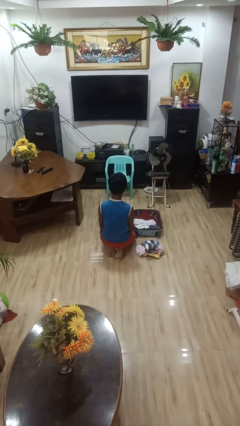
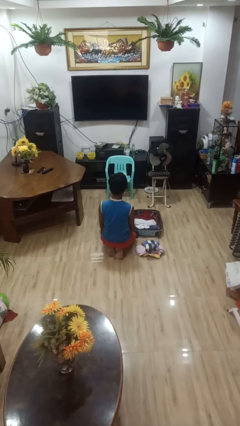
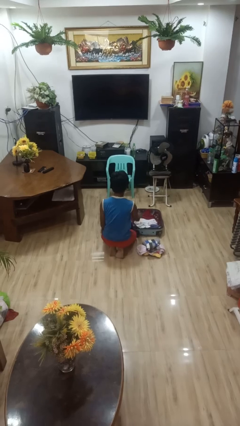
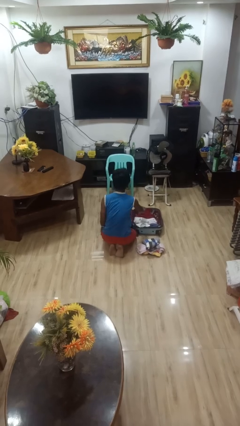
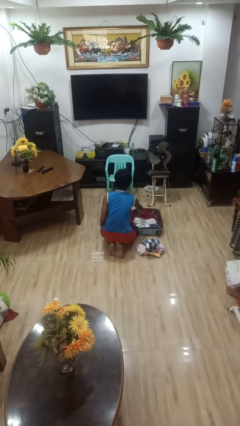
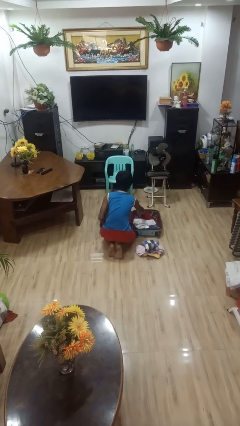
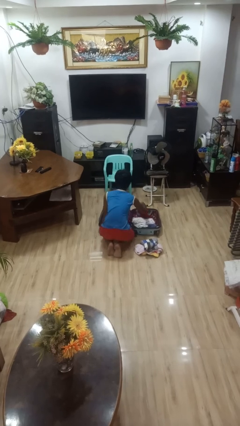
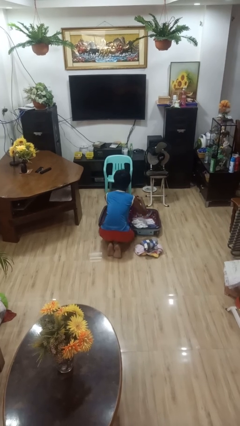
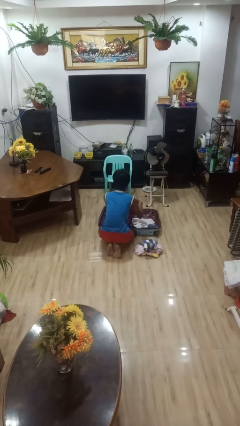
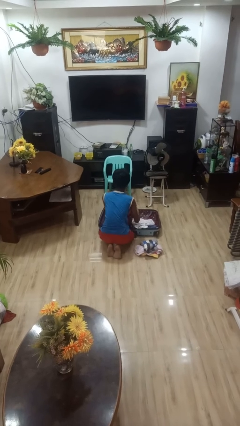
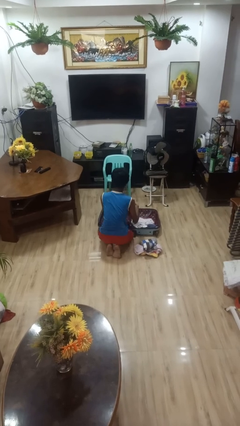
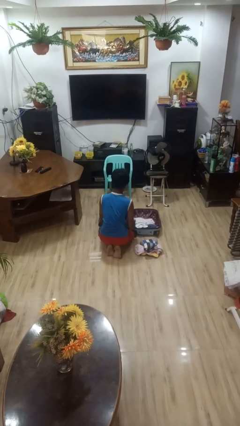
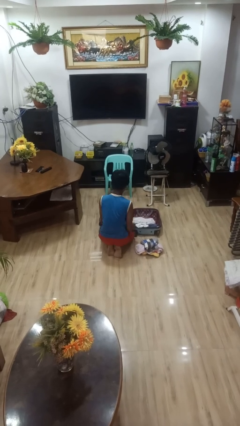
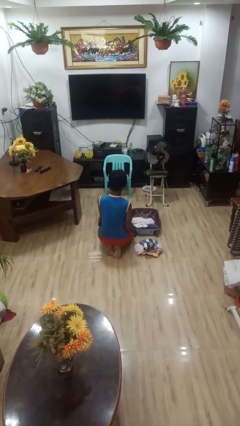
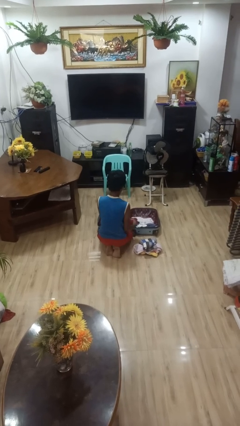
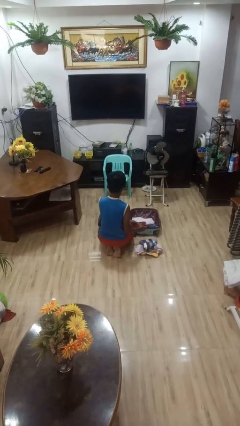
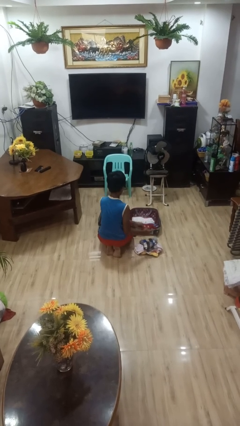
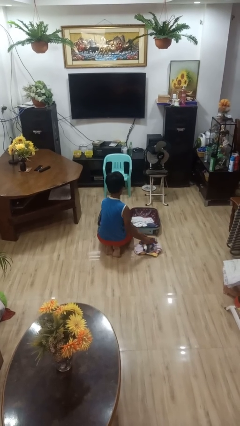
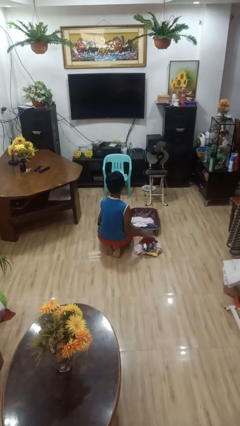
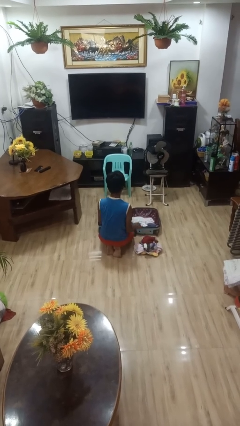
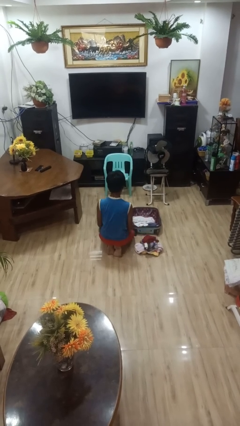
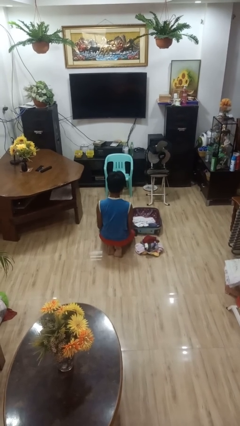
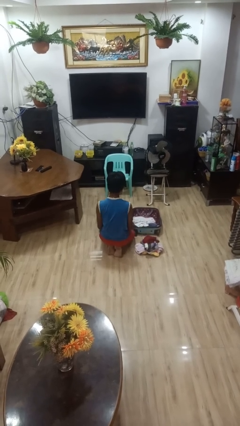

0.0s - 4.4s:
person unloads clothes from suitcase

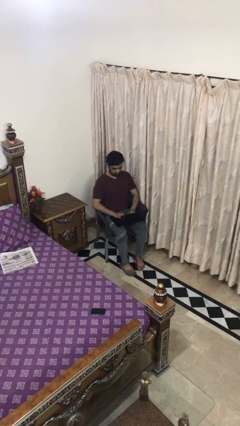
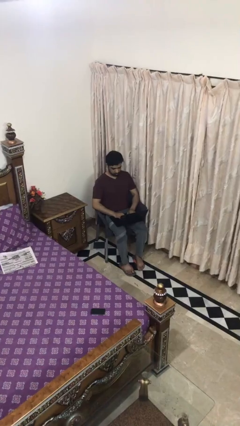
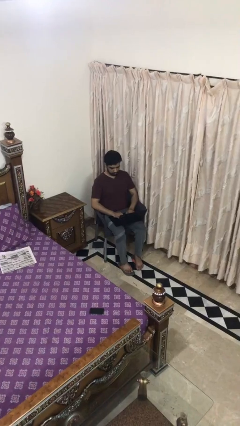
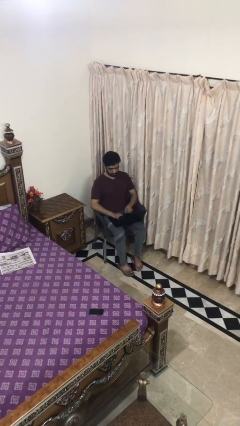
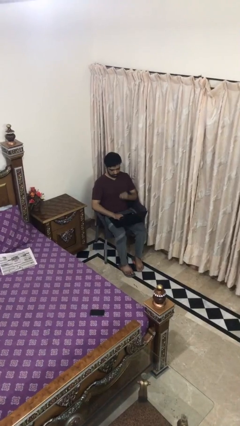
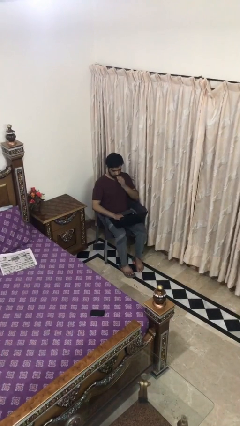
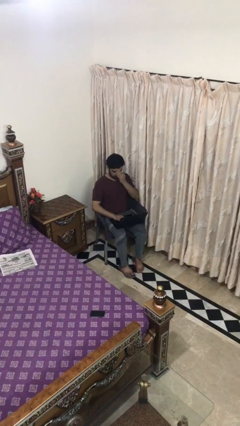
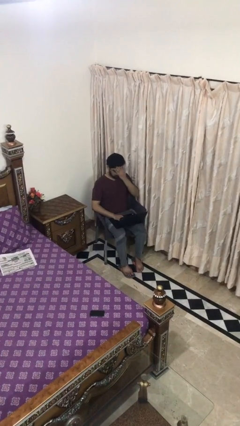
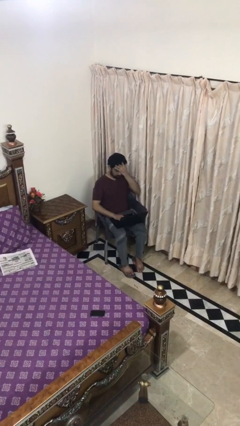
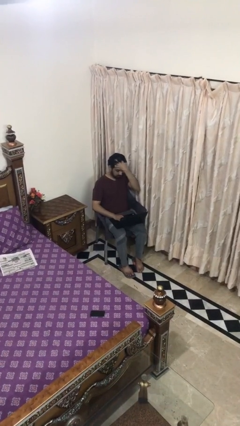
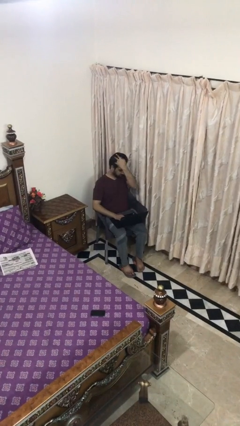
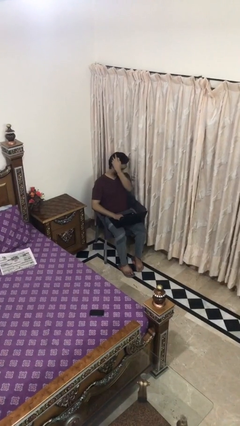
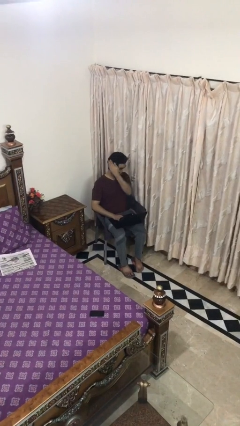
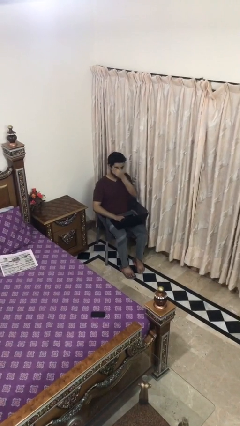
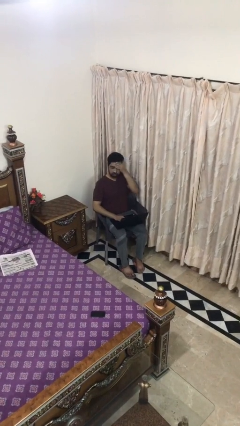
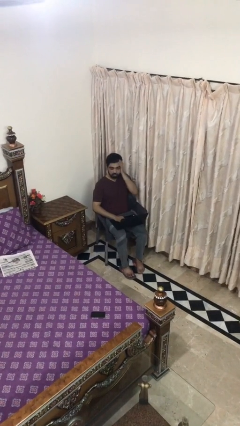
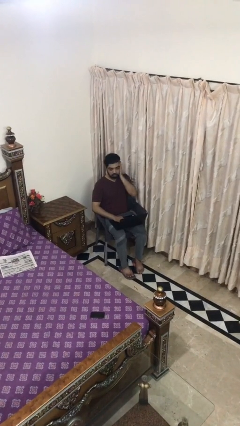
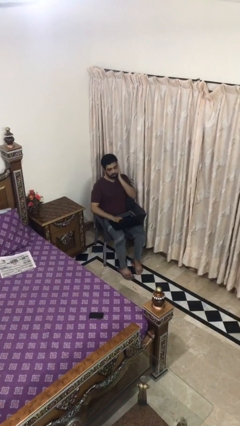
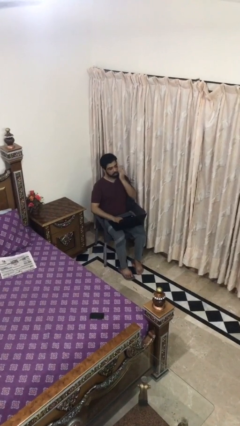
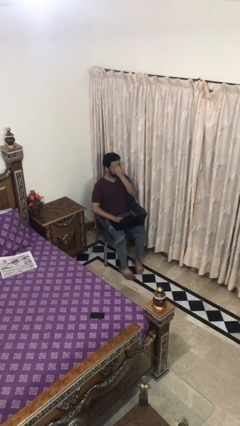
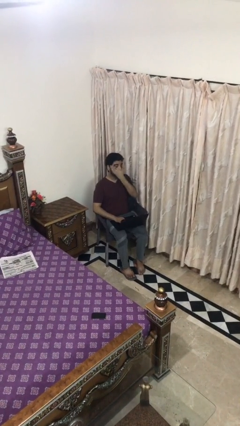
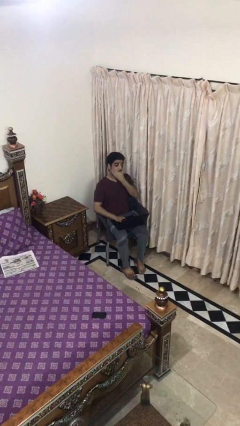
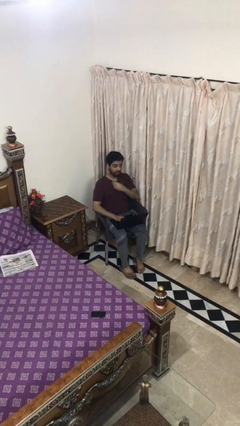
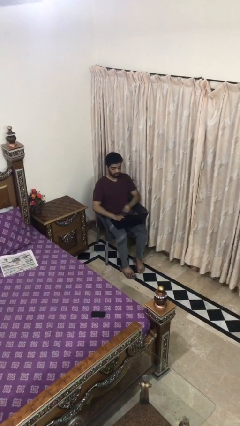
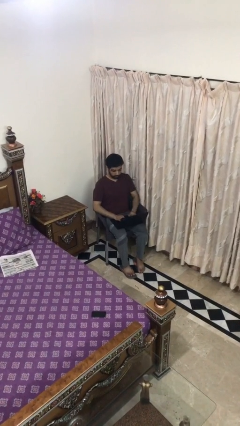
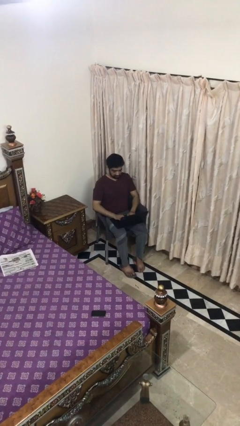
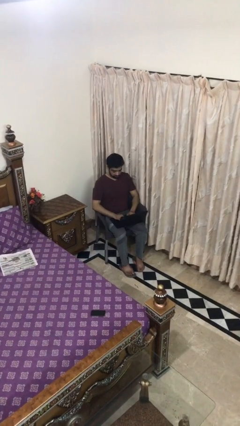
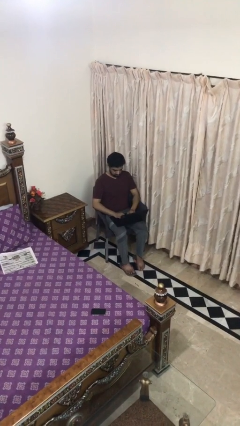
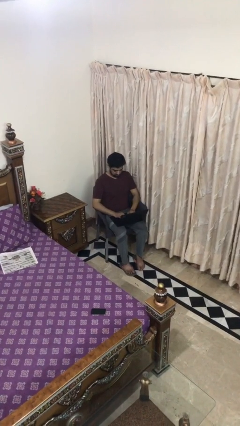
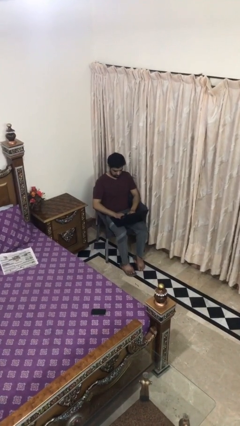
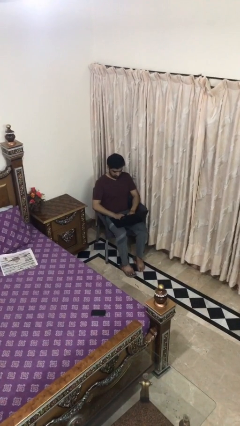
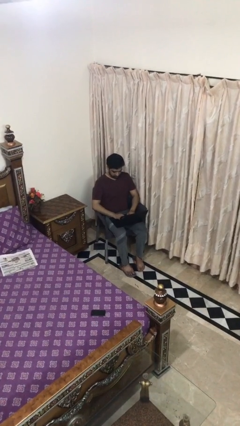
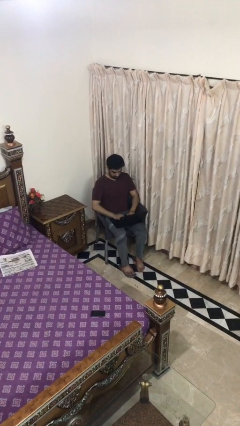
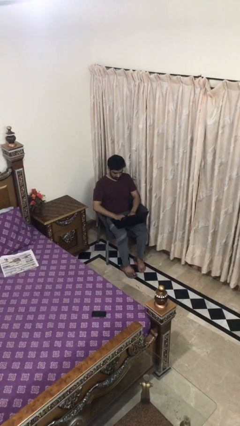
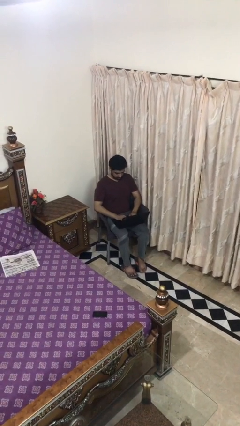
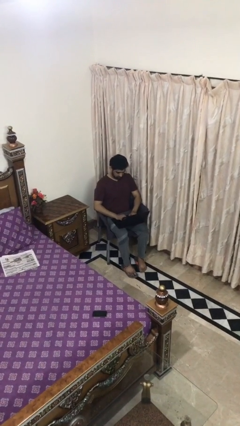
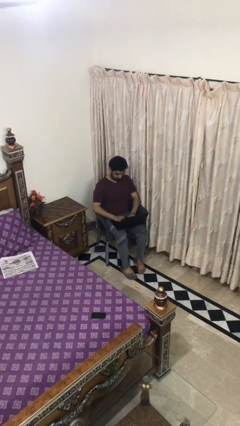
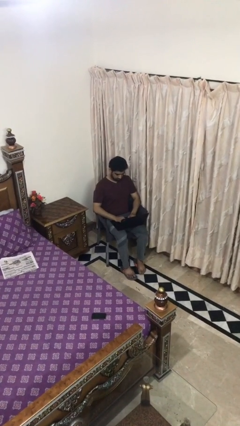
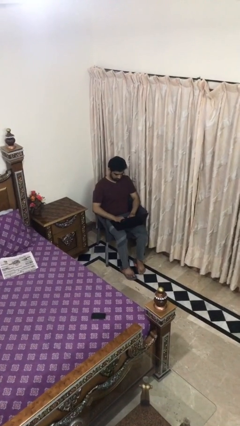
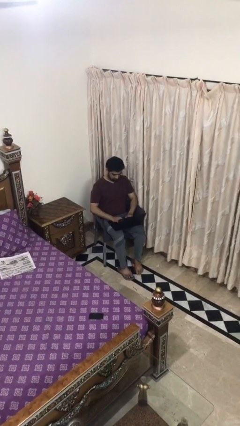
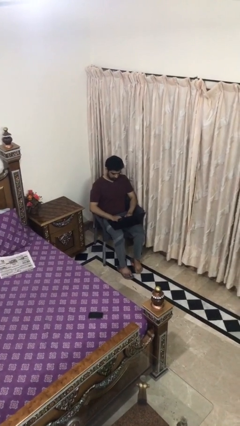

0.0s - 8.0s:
person interacts with laptop

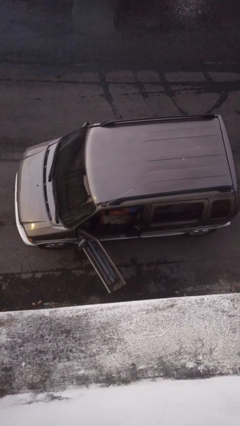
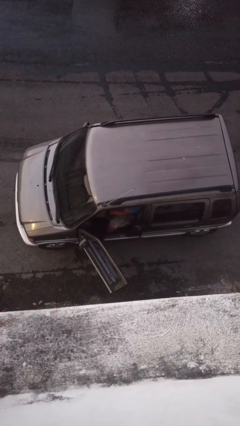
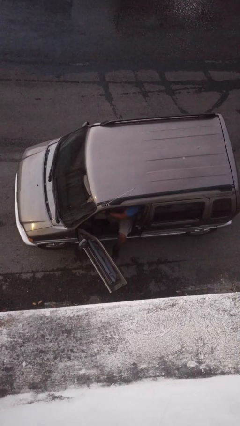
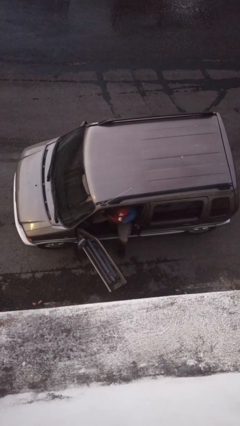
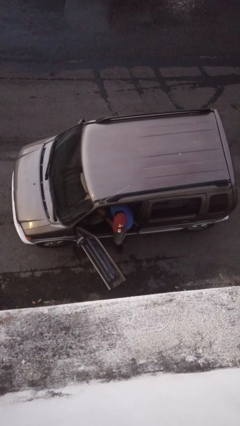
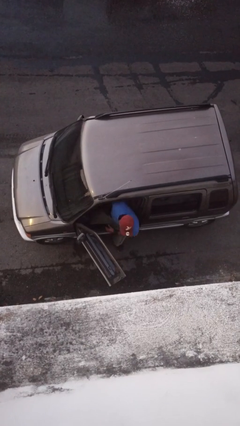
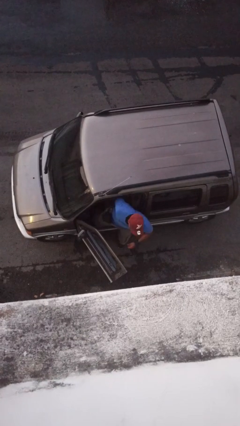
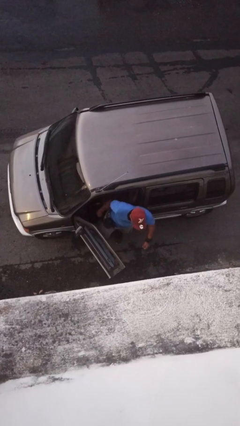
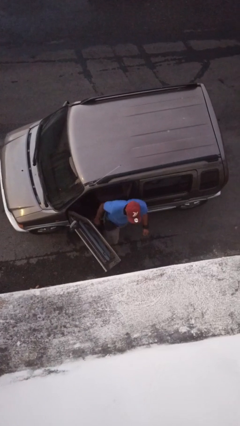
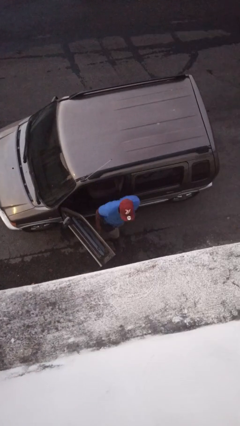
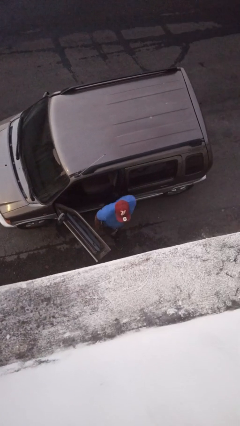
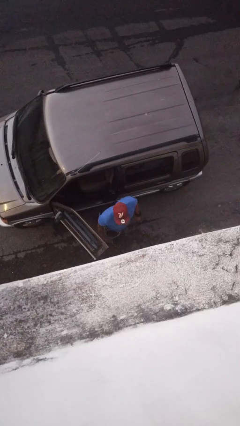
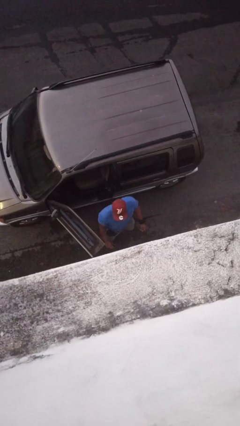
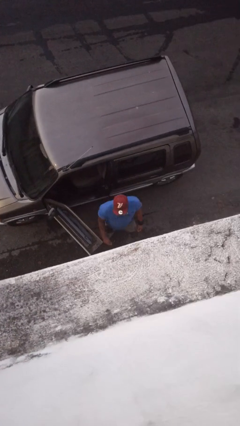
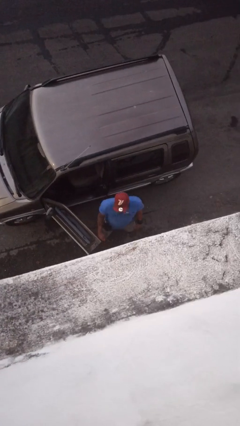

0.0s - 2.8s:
person exits car

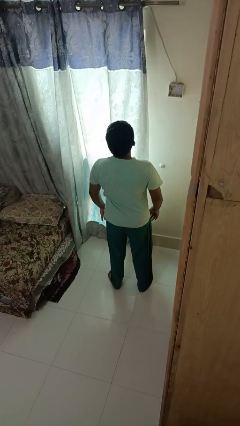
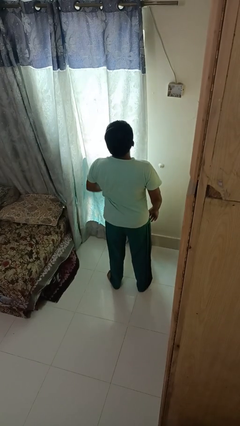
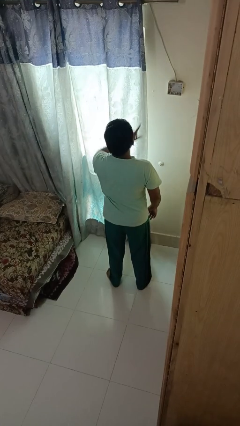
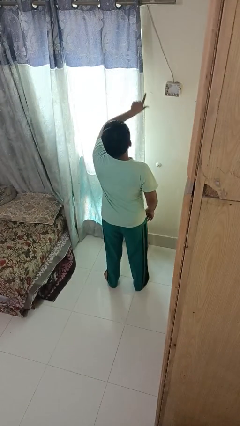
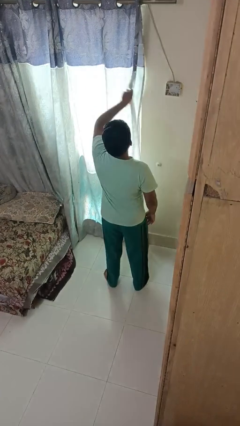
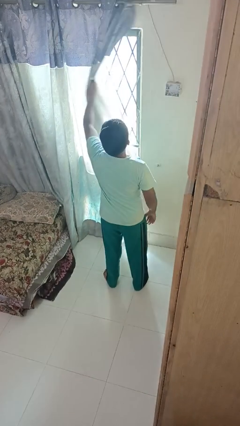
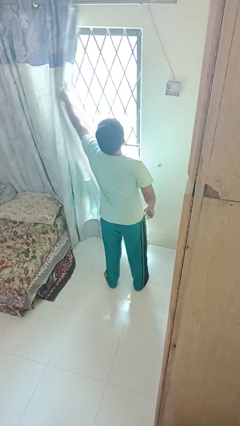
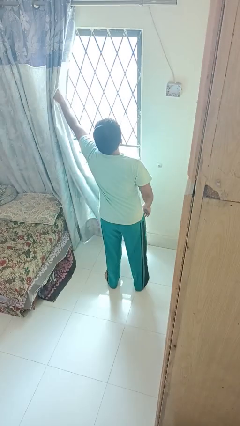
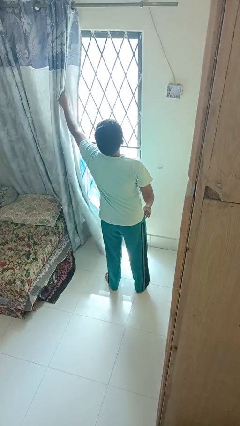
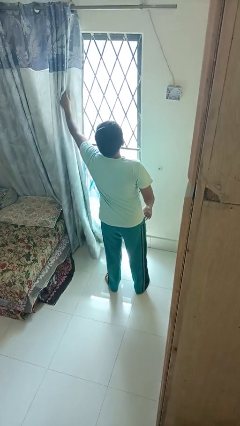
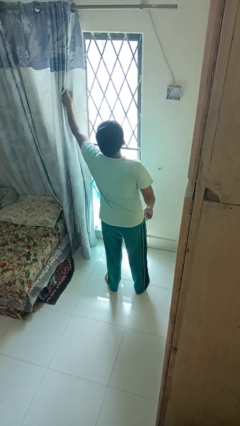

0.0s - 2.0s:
person opens curtains

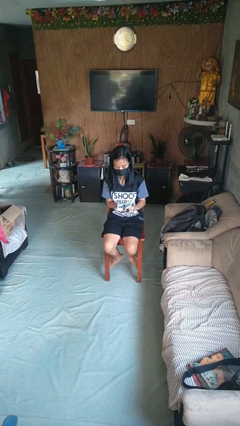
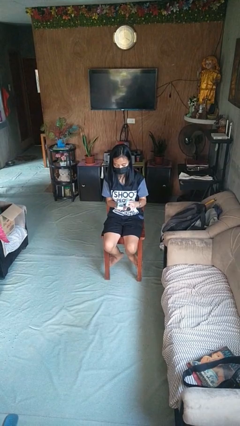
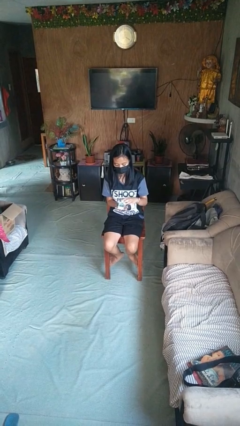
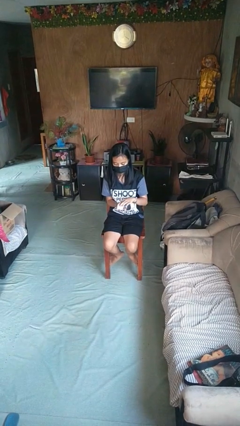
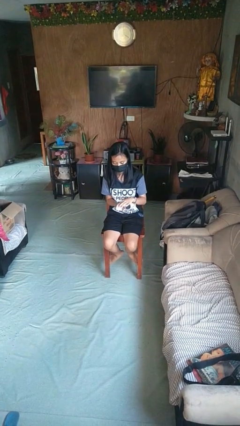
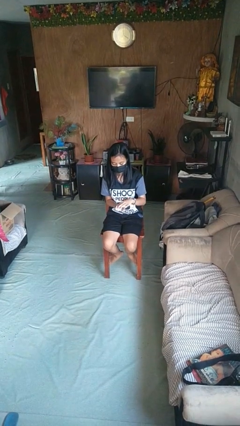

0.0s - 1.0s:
person closes jewelry box
